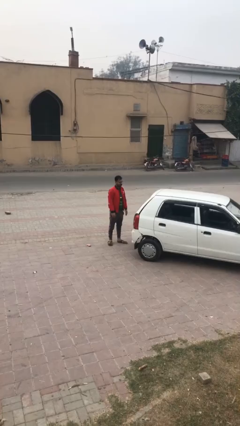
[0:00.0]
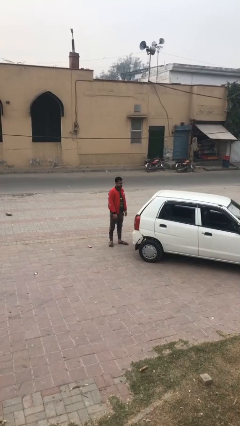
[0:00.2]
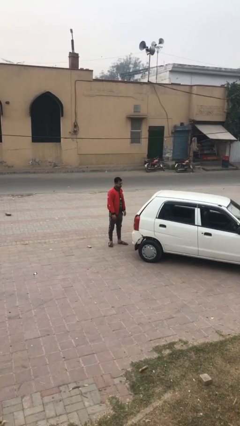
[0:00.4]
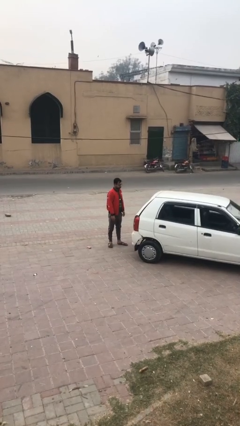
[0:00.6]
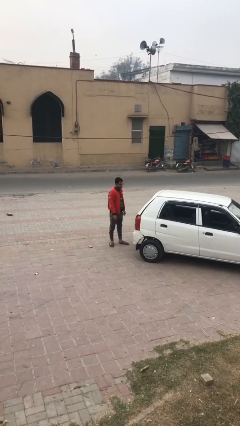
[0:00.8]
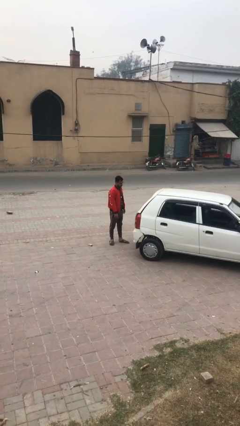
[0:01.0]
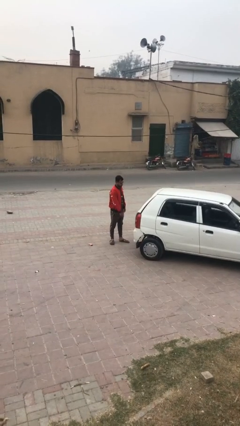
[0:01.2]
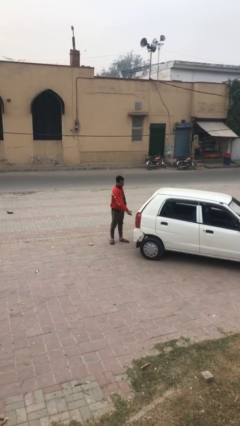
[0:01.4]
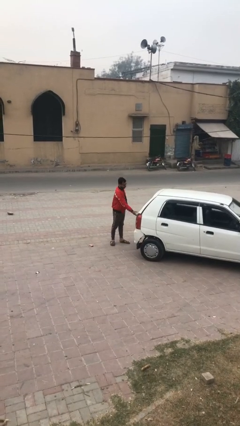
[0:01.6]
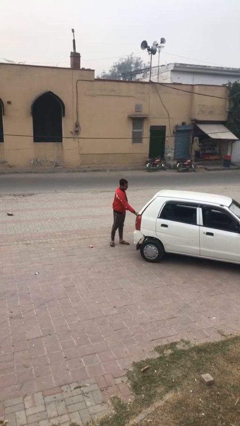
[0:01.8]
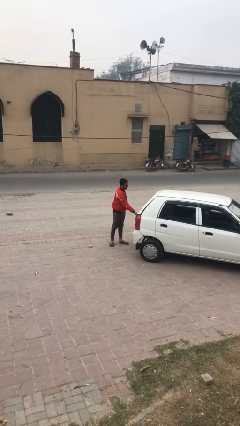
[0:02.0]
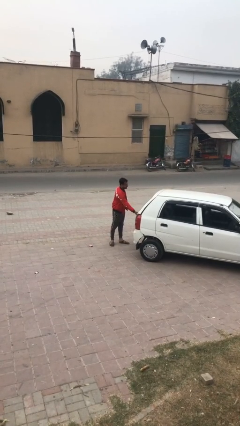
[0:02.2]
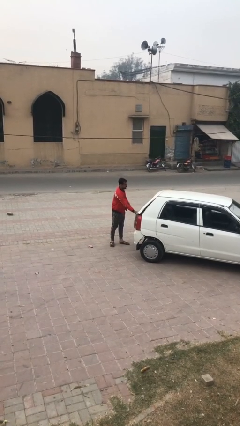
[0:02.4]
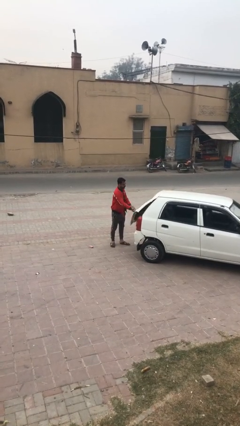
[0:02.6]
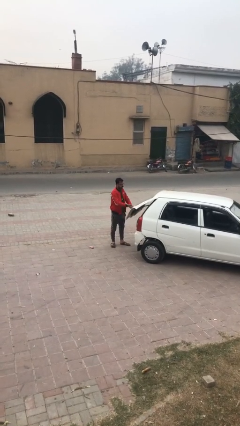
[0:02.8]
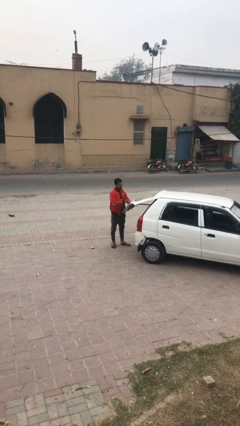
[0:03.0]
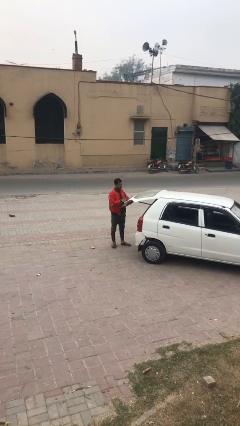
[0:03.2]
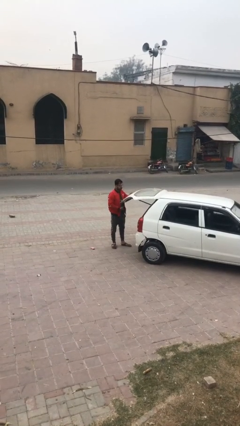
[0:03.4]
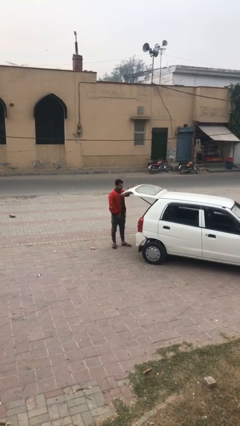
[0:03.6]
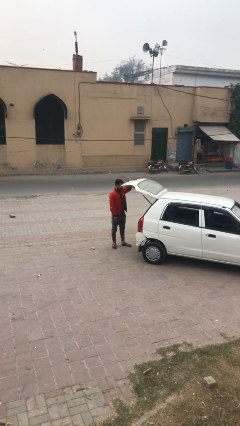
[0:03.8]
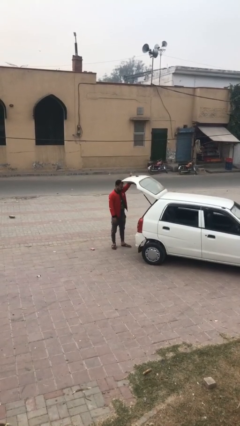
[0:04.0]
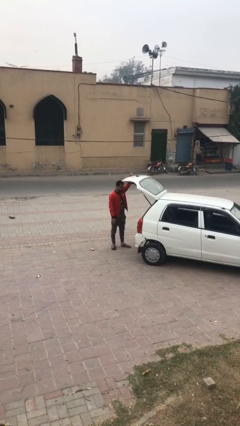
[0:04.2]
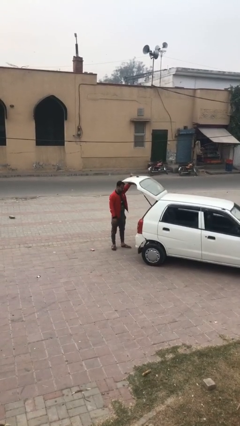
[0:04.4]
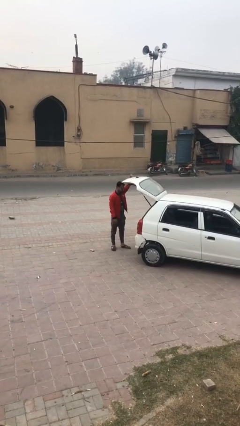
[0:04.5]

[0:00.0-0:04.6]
person opens car trunk

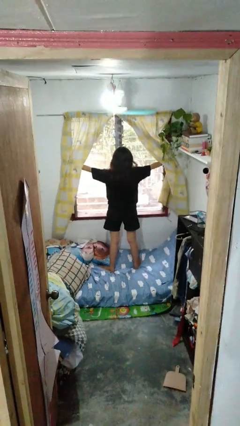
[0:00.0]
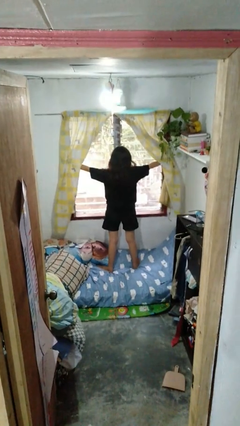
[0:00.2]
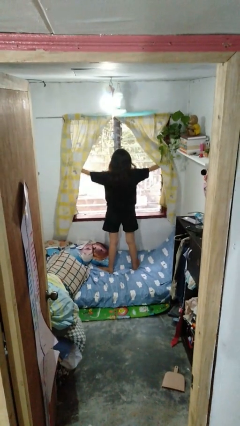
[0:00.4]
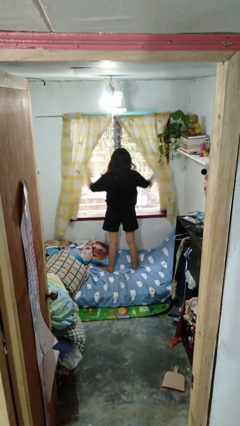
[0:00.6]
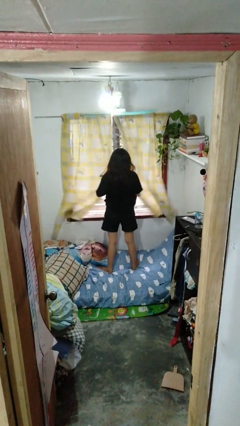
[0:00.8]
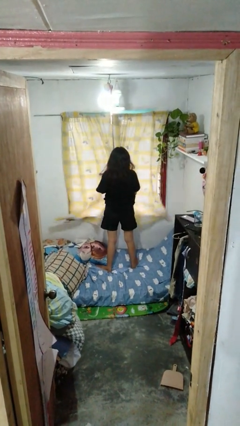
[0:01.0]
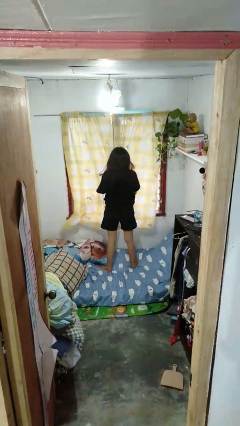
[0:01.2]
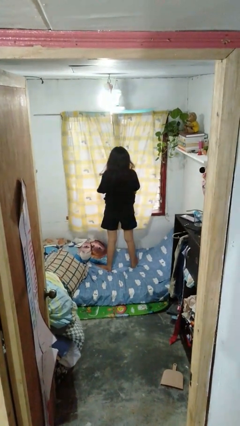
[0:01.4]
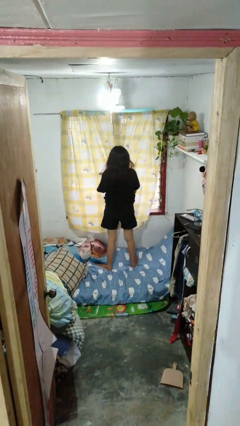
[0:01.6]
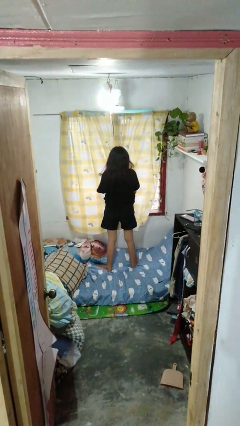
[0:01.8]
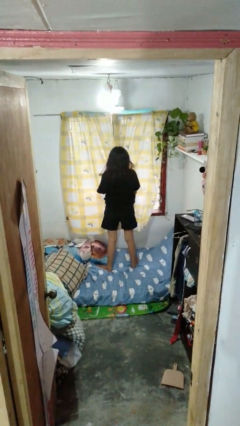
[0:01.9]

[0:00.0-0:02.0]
person closes curtains

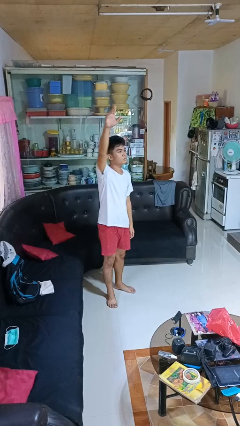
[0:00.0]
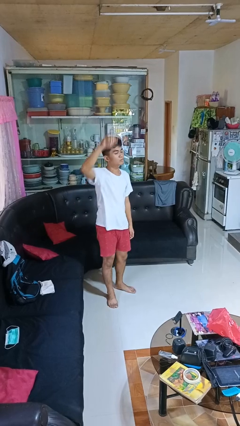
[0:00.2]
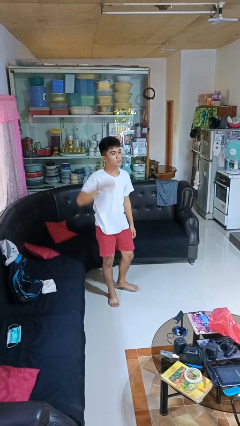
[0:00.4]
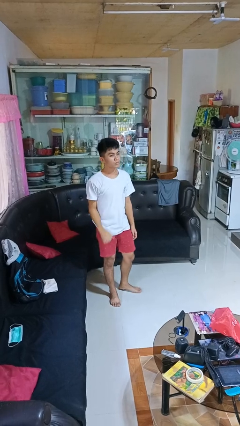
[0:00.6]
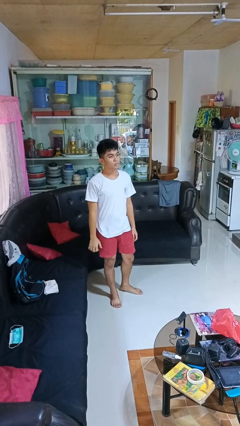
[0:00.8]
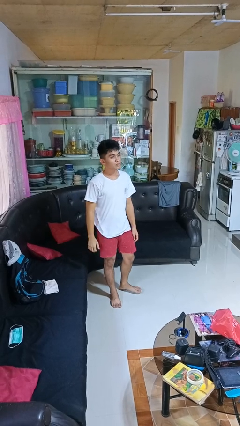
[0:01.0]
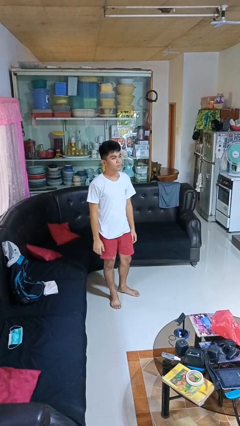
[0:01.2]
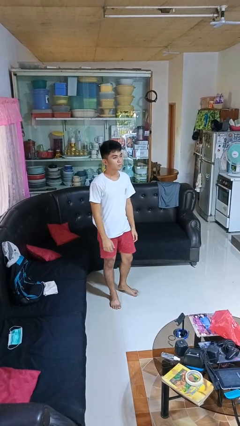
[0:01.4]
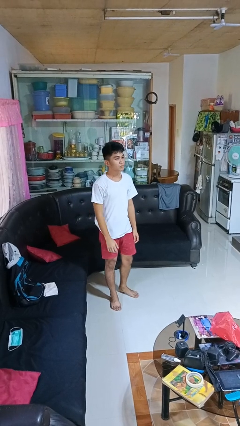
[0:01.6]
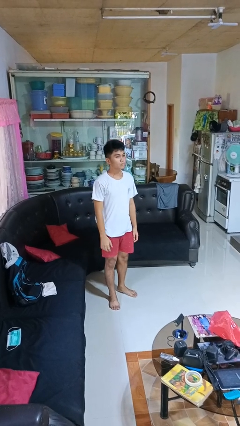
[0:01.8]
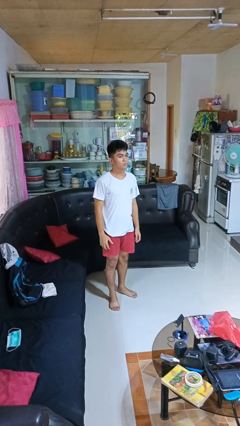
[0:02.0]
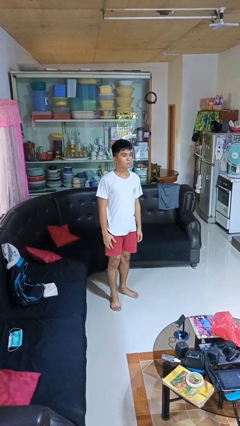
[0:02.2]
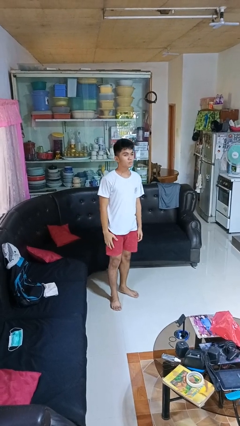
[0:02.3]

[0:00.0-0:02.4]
person gestures lower hand

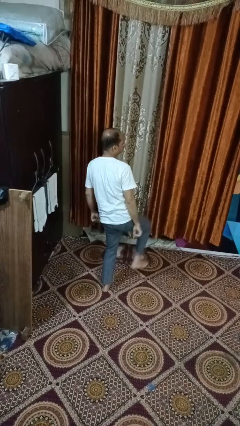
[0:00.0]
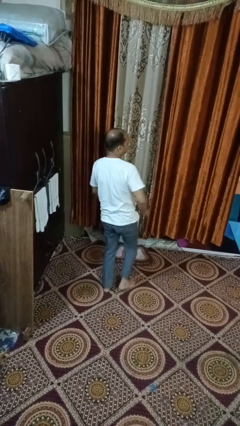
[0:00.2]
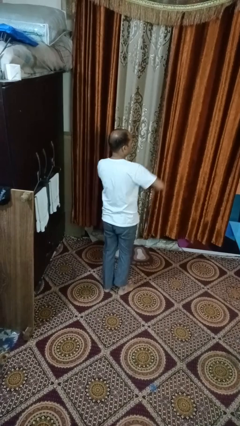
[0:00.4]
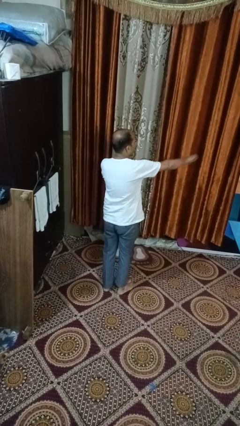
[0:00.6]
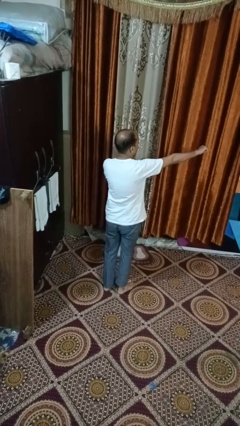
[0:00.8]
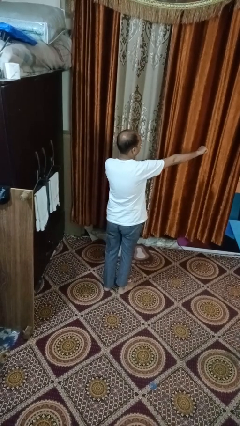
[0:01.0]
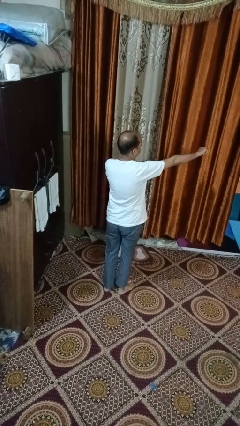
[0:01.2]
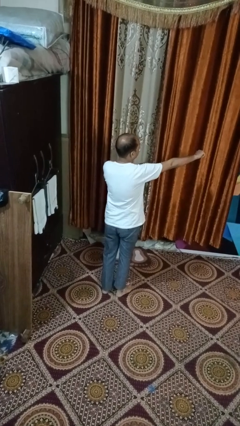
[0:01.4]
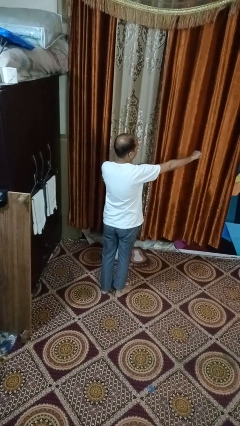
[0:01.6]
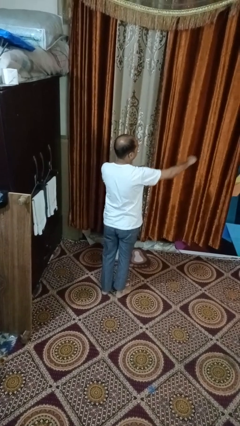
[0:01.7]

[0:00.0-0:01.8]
person karate chop

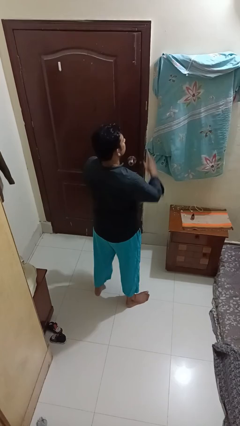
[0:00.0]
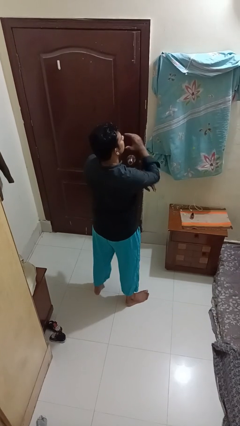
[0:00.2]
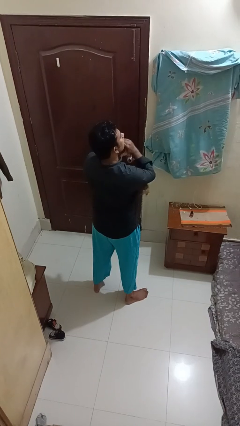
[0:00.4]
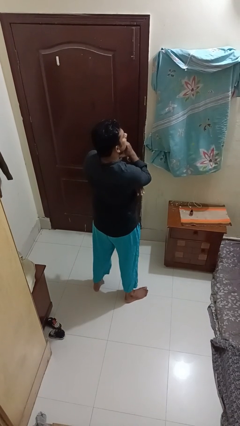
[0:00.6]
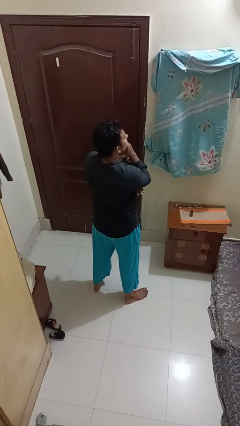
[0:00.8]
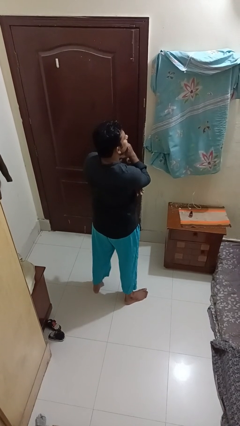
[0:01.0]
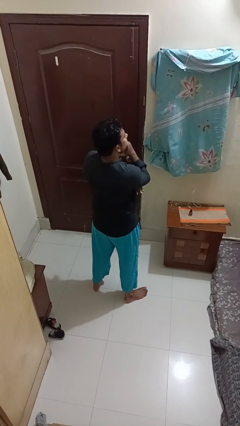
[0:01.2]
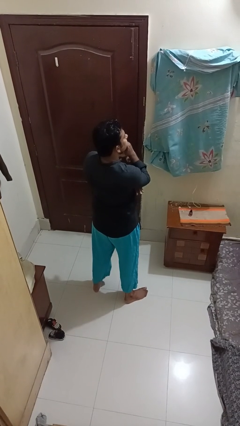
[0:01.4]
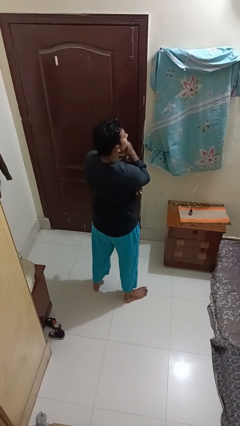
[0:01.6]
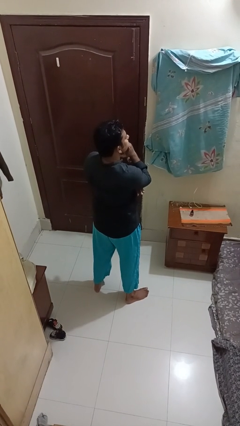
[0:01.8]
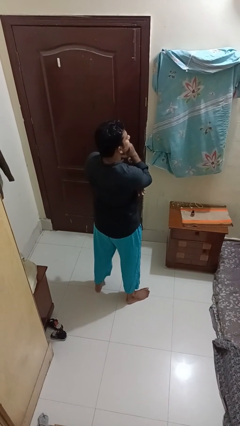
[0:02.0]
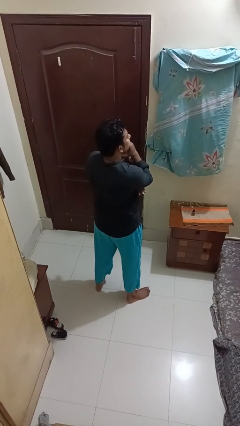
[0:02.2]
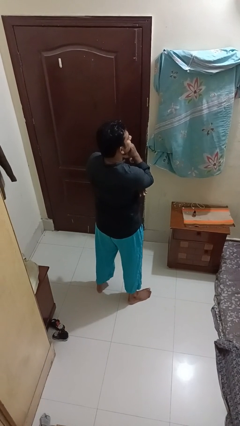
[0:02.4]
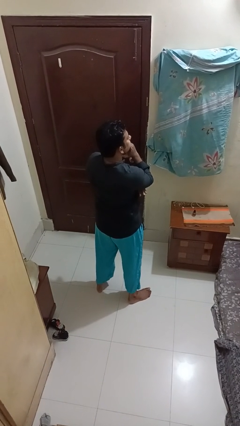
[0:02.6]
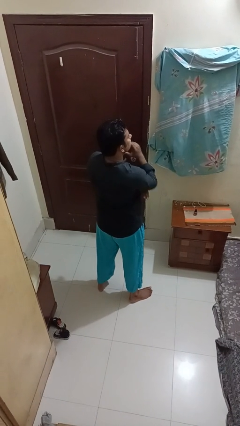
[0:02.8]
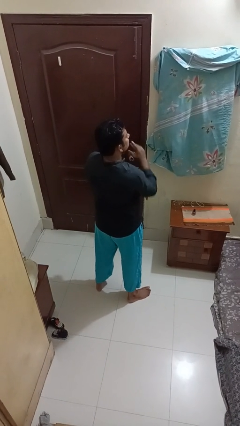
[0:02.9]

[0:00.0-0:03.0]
person strokes chin

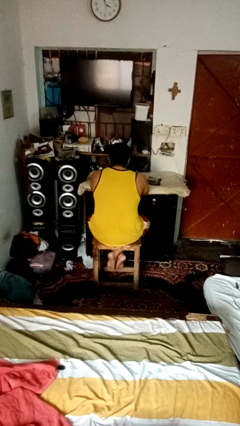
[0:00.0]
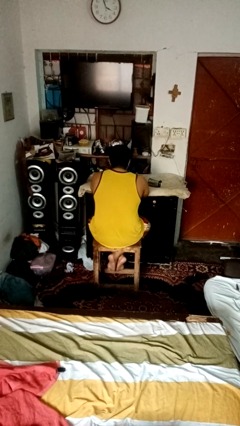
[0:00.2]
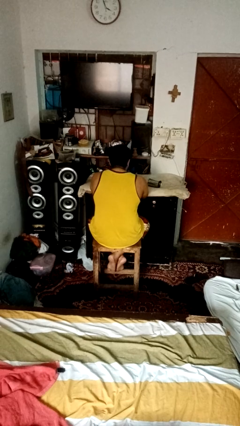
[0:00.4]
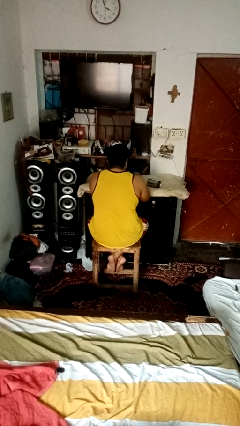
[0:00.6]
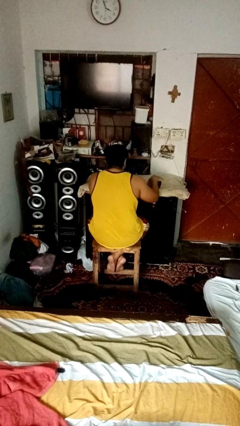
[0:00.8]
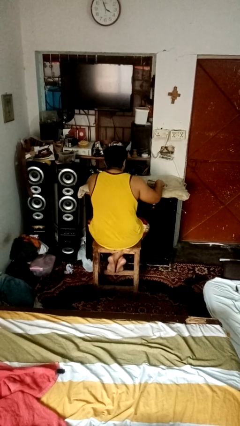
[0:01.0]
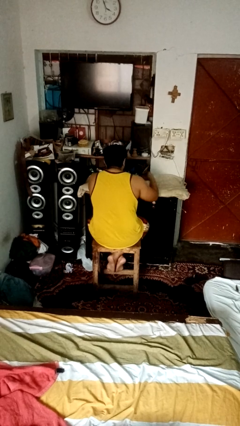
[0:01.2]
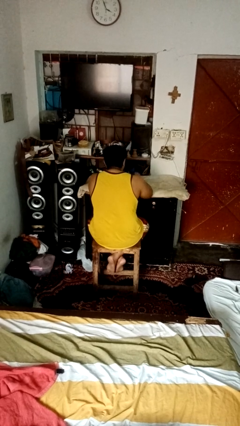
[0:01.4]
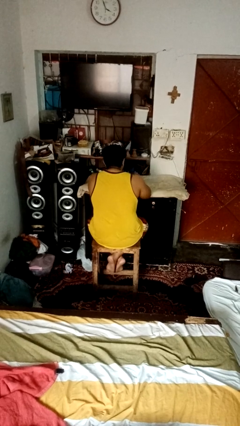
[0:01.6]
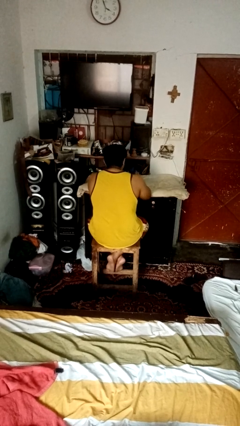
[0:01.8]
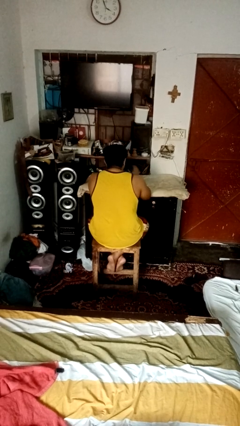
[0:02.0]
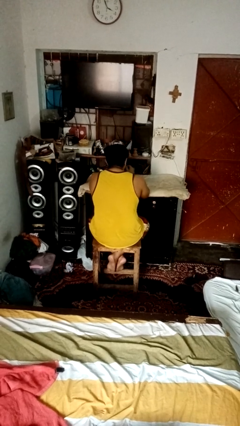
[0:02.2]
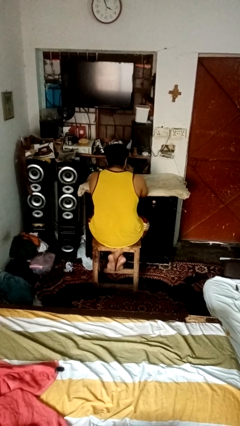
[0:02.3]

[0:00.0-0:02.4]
person sets upright glass

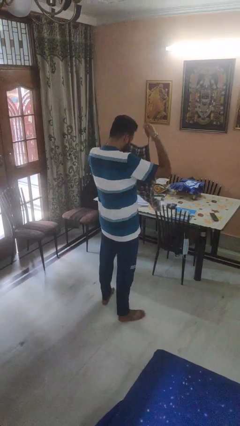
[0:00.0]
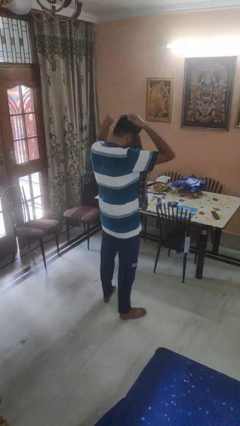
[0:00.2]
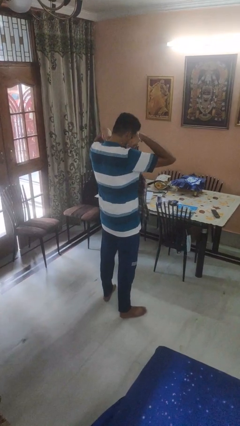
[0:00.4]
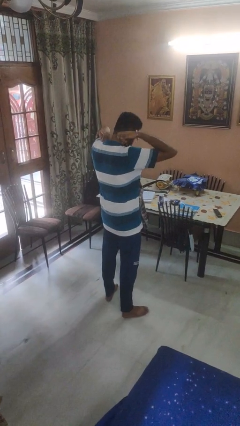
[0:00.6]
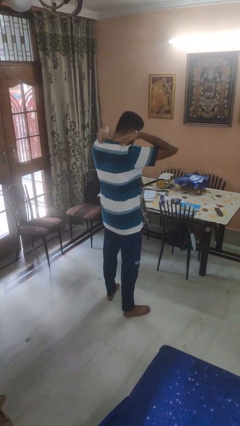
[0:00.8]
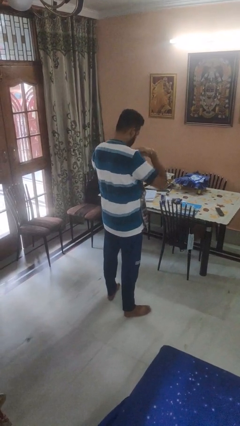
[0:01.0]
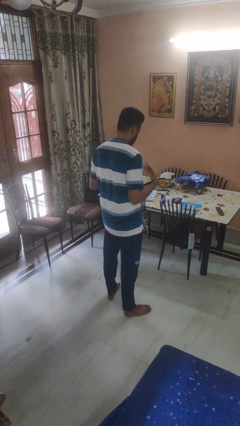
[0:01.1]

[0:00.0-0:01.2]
person puts on apron
